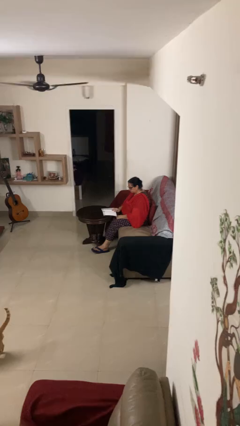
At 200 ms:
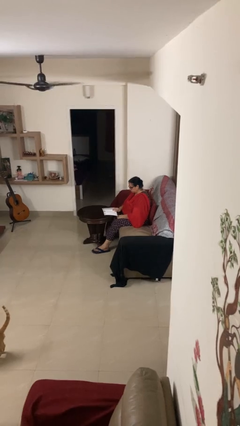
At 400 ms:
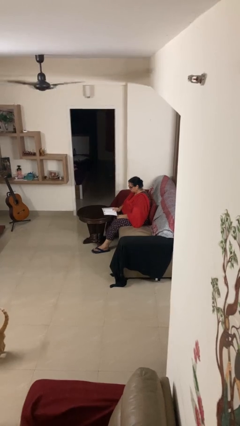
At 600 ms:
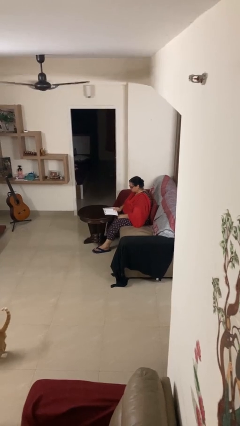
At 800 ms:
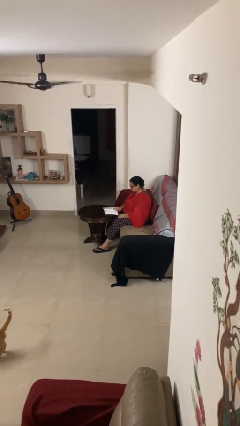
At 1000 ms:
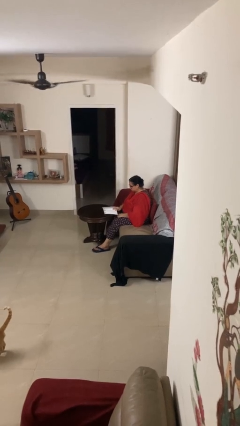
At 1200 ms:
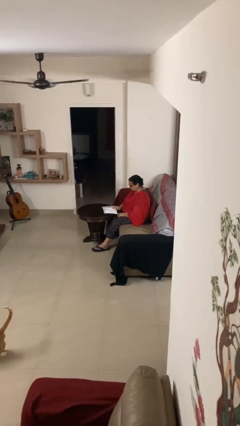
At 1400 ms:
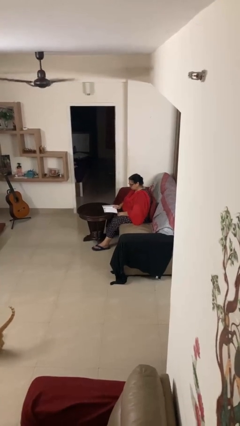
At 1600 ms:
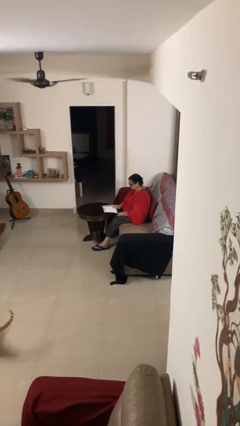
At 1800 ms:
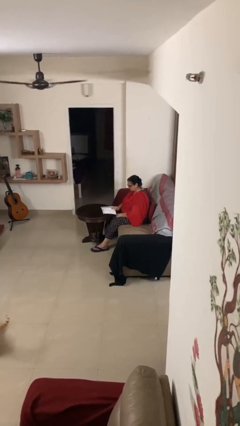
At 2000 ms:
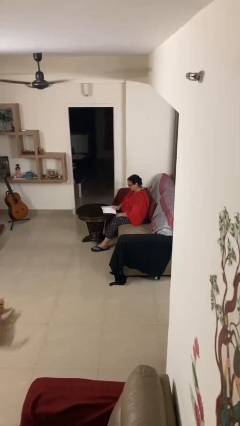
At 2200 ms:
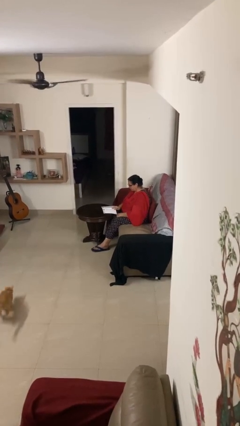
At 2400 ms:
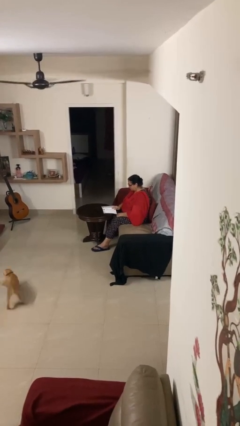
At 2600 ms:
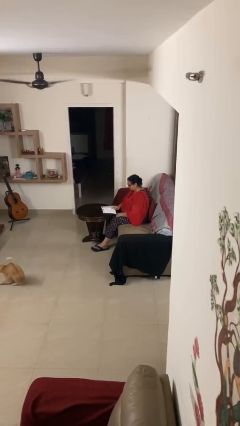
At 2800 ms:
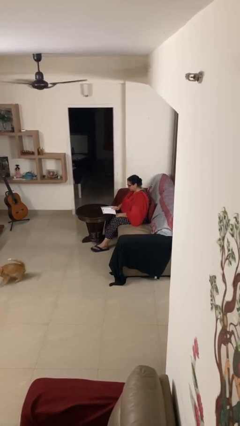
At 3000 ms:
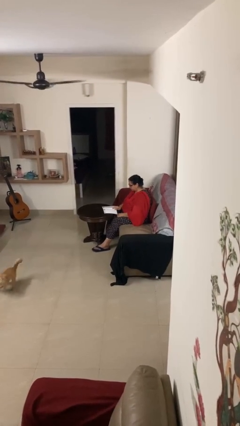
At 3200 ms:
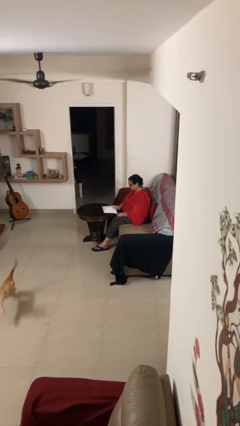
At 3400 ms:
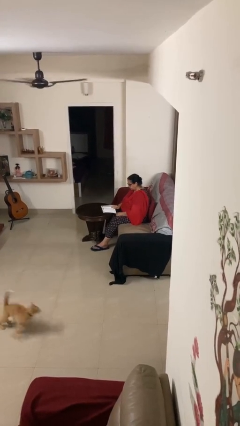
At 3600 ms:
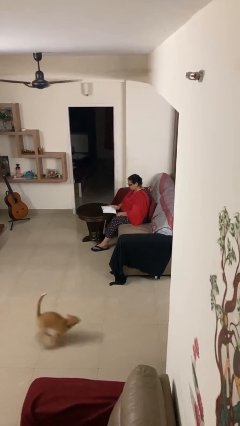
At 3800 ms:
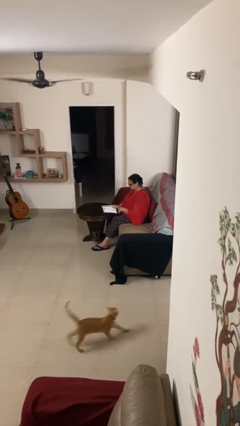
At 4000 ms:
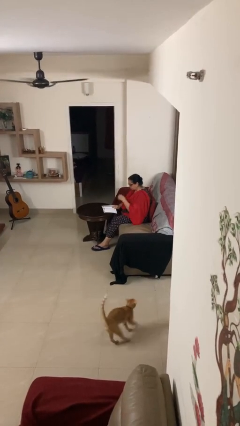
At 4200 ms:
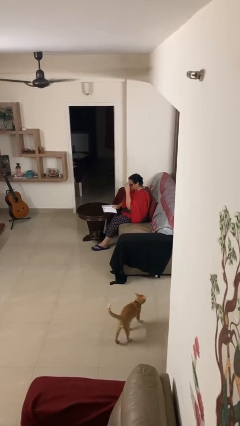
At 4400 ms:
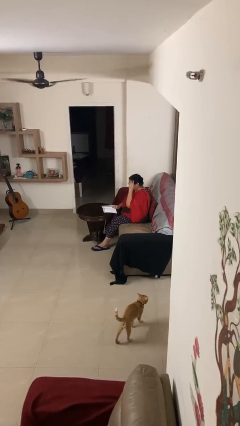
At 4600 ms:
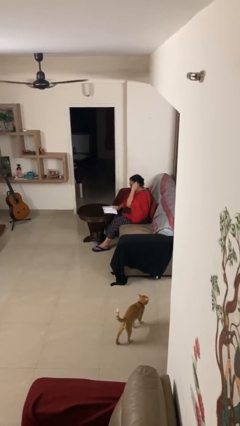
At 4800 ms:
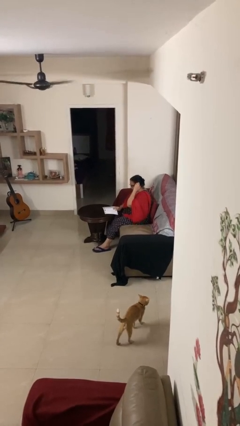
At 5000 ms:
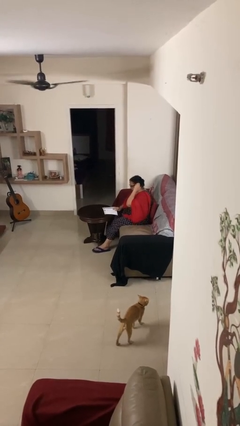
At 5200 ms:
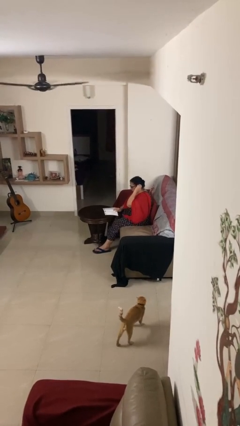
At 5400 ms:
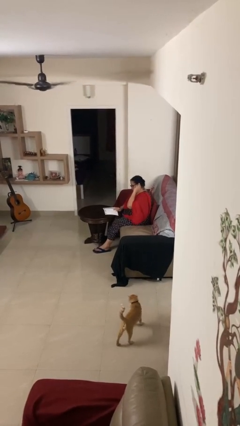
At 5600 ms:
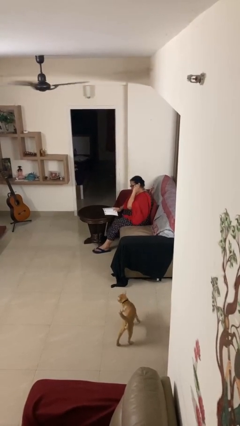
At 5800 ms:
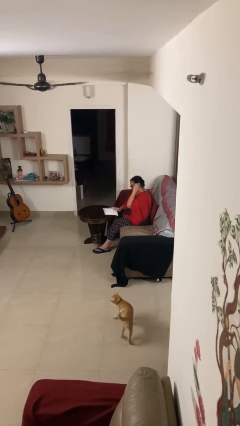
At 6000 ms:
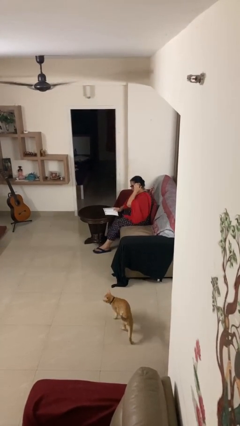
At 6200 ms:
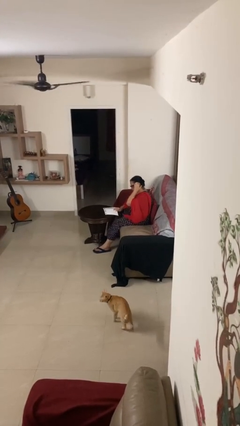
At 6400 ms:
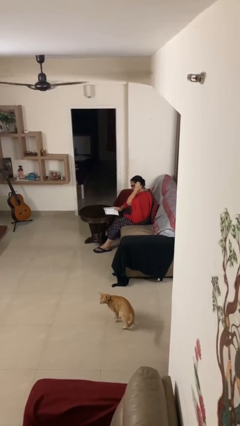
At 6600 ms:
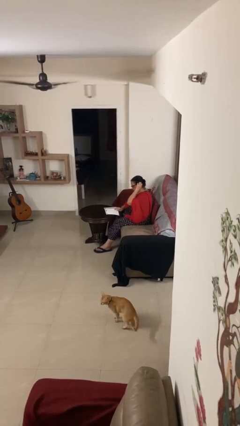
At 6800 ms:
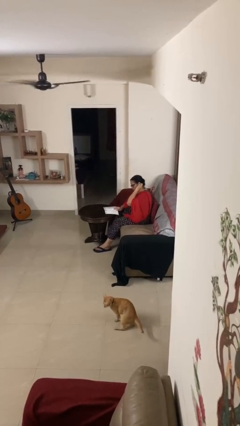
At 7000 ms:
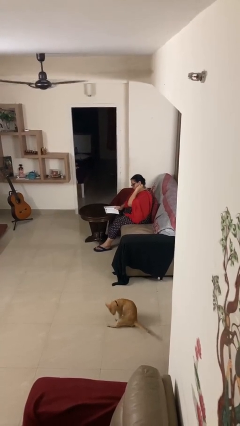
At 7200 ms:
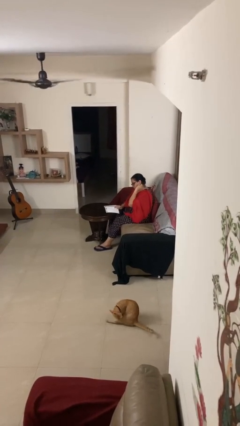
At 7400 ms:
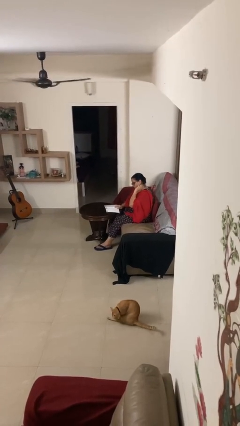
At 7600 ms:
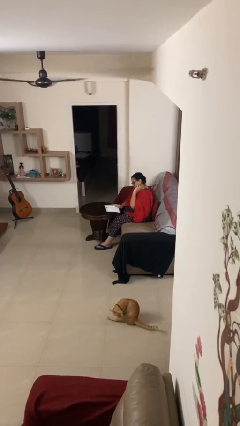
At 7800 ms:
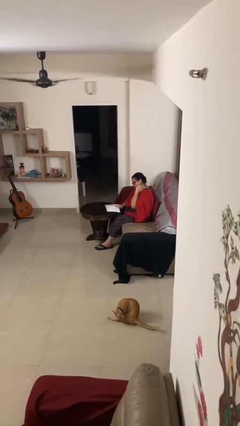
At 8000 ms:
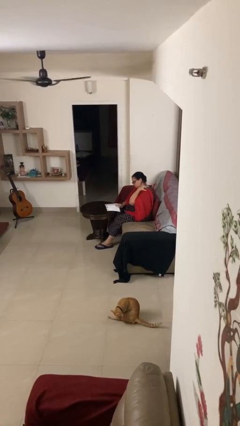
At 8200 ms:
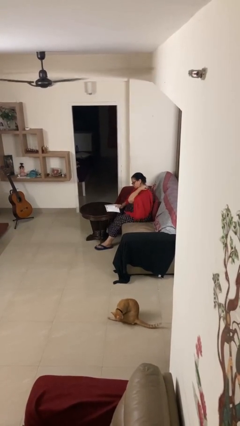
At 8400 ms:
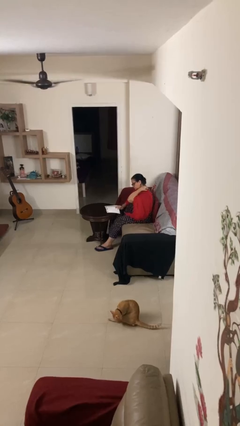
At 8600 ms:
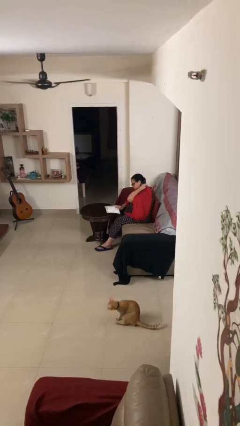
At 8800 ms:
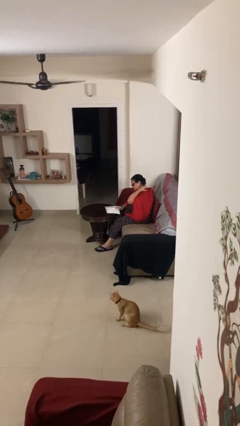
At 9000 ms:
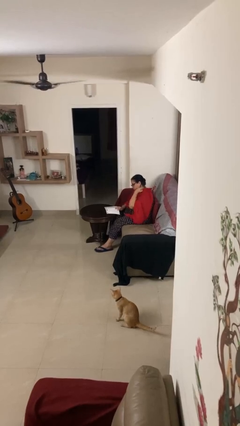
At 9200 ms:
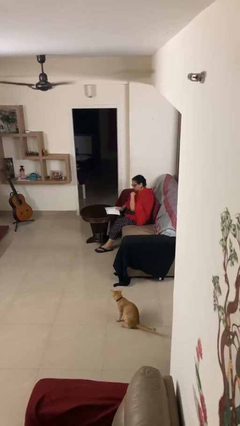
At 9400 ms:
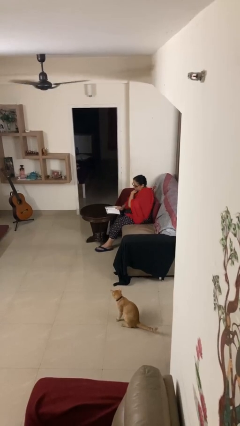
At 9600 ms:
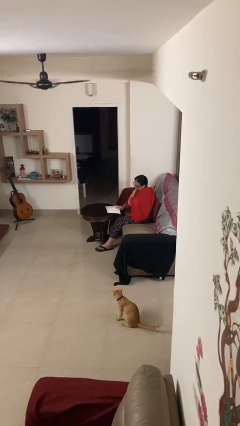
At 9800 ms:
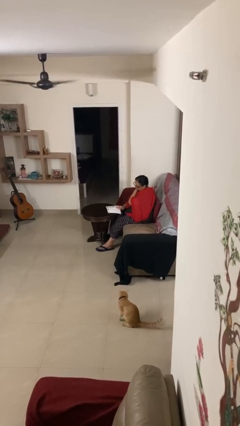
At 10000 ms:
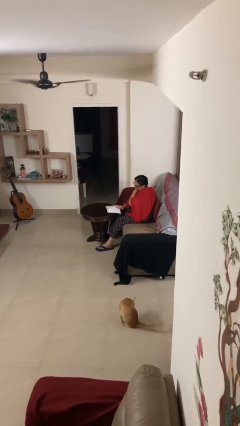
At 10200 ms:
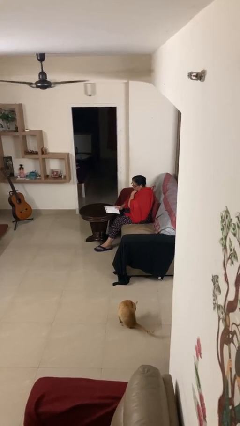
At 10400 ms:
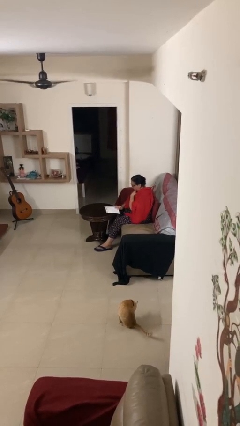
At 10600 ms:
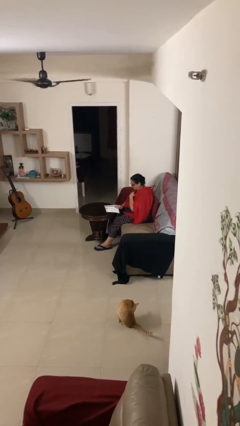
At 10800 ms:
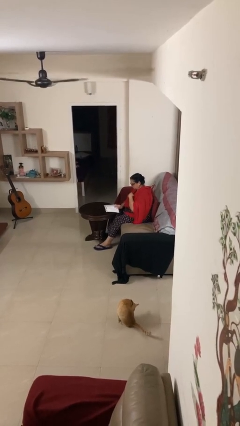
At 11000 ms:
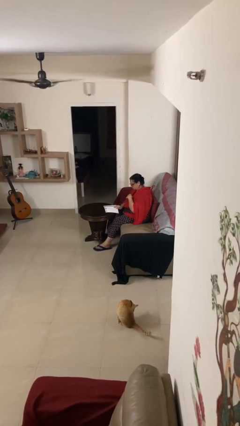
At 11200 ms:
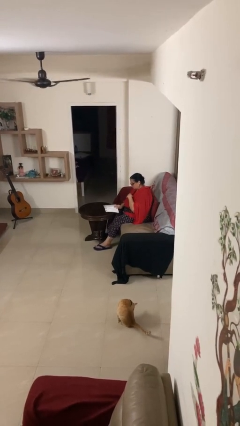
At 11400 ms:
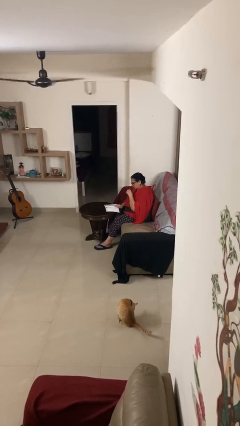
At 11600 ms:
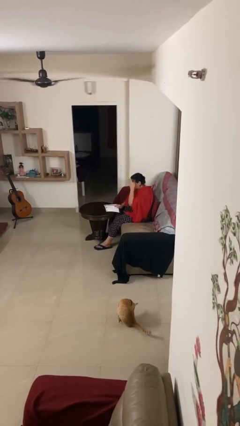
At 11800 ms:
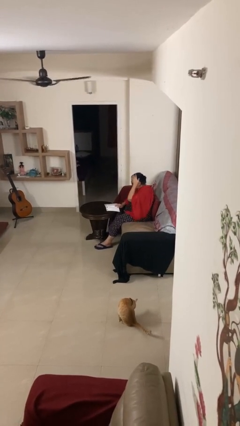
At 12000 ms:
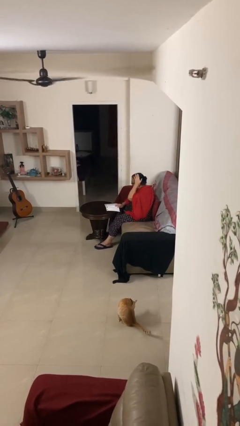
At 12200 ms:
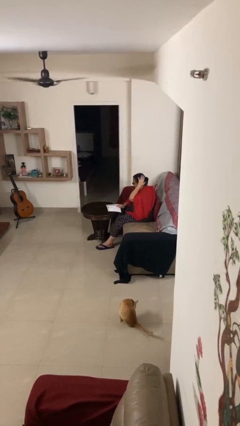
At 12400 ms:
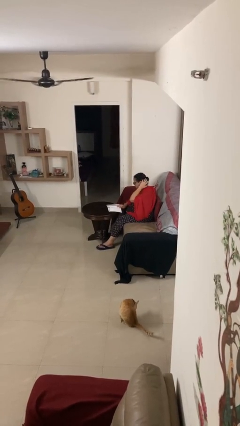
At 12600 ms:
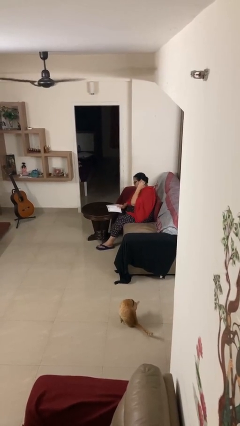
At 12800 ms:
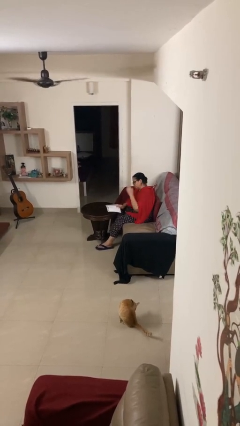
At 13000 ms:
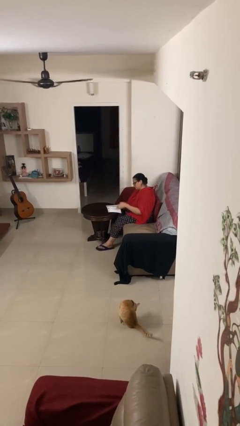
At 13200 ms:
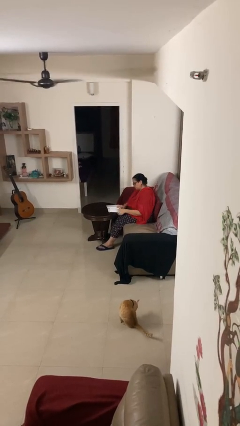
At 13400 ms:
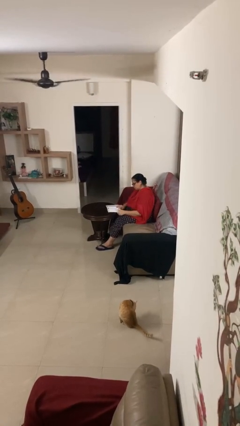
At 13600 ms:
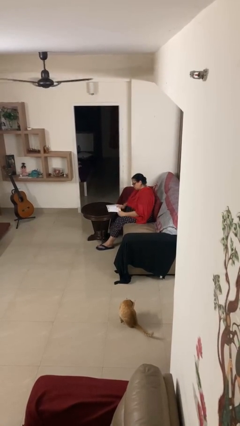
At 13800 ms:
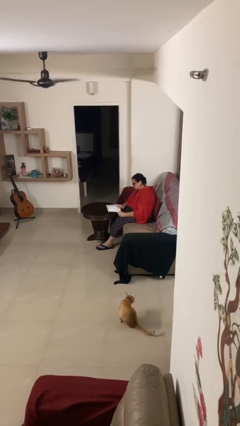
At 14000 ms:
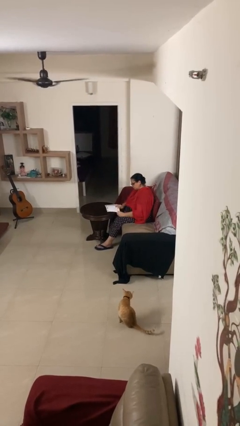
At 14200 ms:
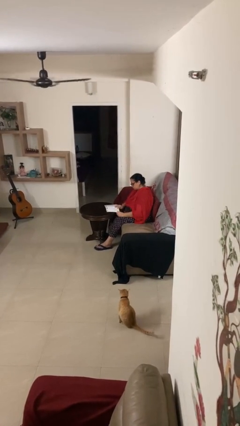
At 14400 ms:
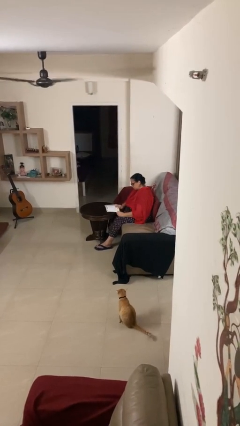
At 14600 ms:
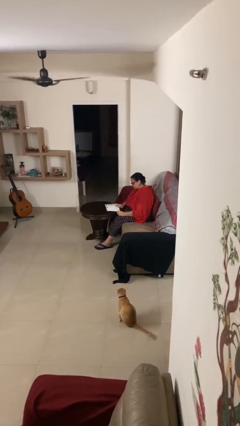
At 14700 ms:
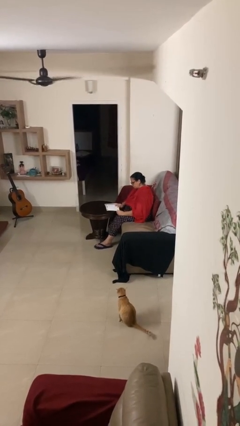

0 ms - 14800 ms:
person reads document

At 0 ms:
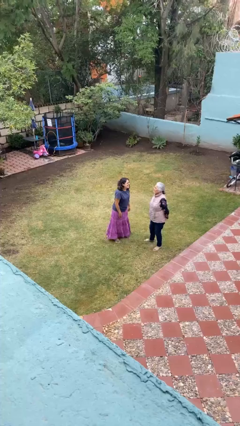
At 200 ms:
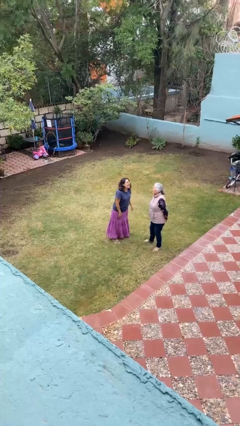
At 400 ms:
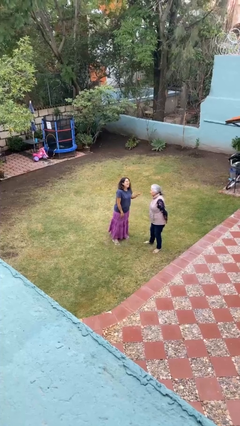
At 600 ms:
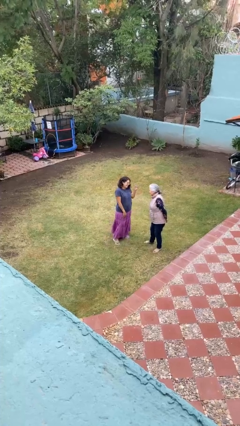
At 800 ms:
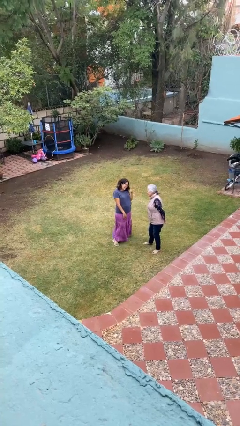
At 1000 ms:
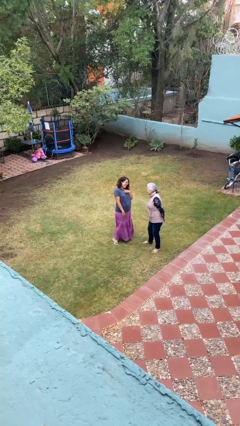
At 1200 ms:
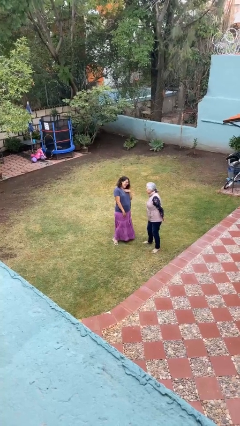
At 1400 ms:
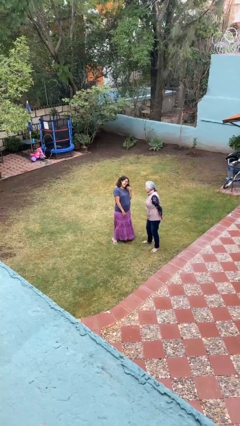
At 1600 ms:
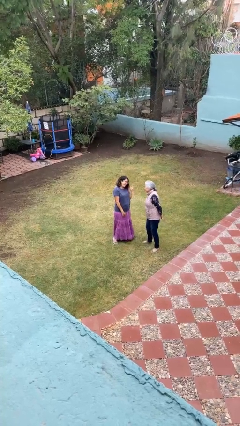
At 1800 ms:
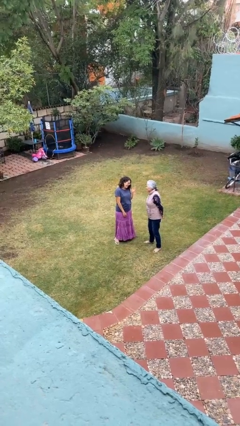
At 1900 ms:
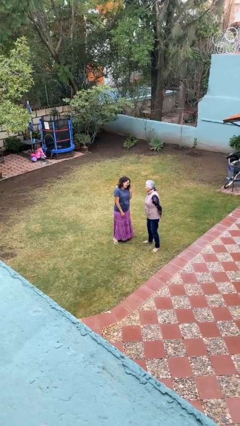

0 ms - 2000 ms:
person laughs with person

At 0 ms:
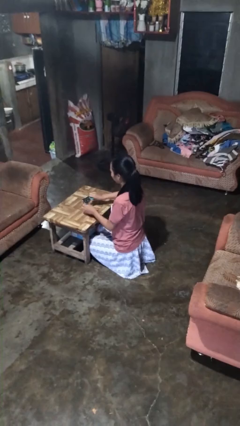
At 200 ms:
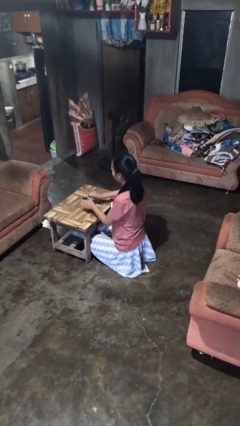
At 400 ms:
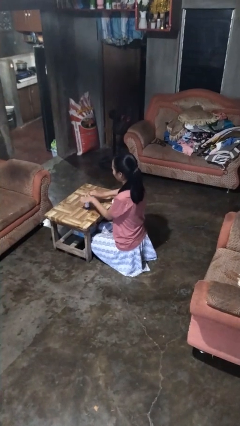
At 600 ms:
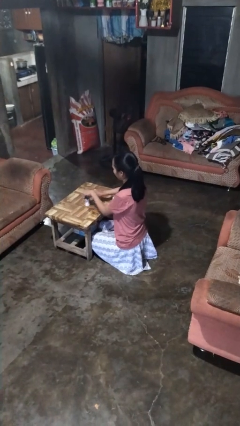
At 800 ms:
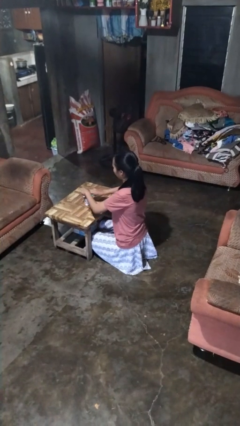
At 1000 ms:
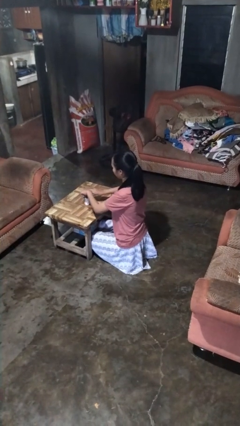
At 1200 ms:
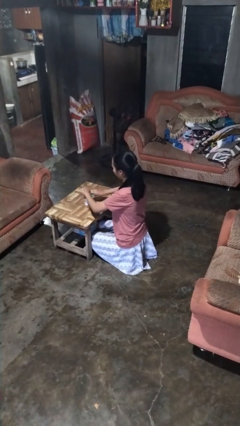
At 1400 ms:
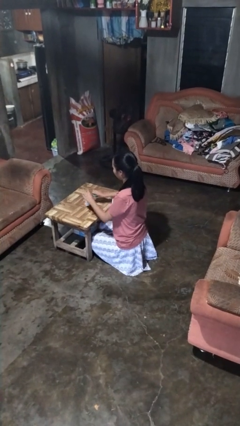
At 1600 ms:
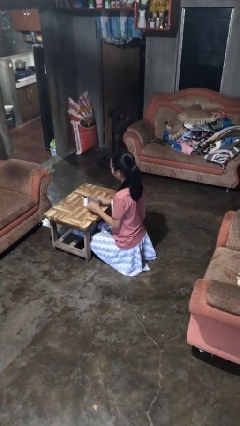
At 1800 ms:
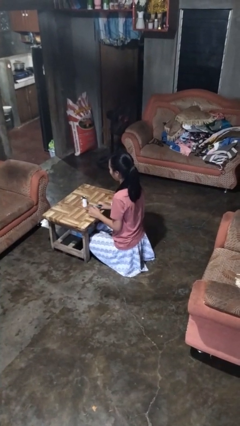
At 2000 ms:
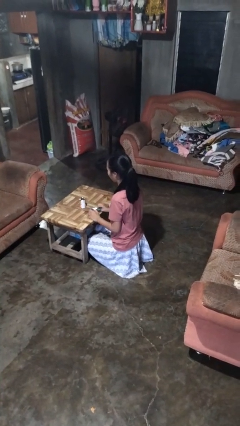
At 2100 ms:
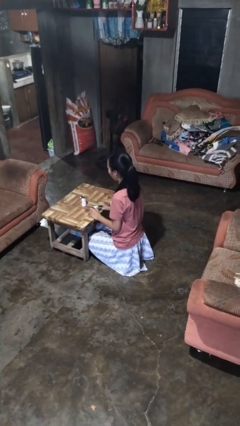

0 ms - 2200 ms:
person opens can with can opener
